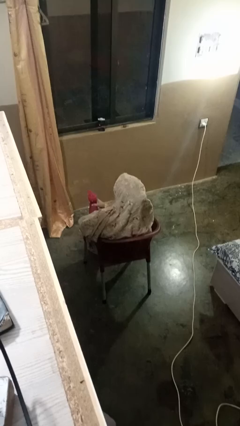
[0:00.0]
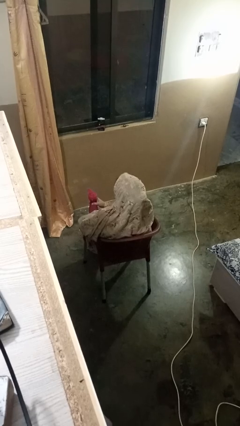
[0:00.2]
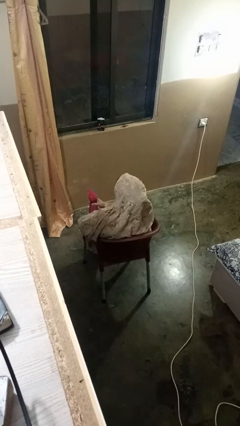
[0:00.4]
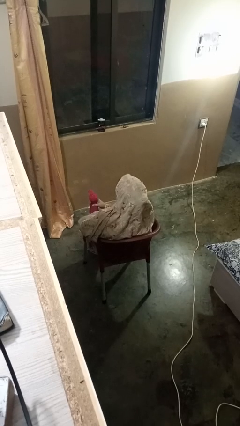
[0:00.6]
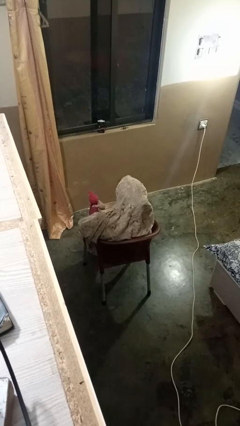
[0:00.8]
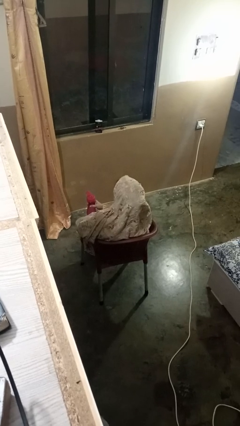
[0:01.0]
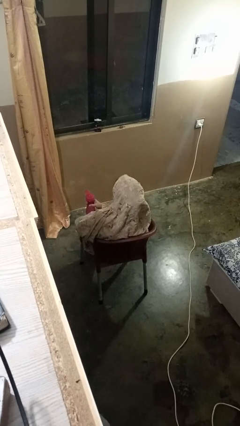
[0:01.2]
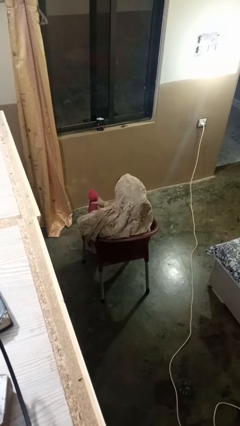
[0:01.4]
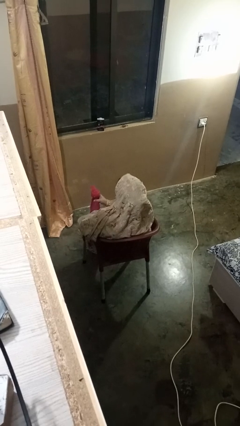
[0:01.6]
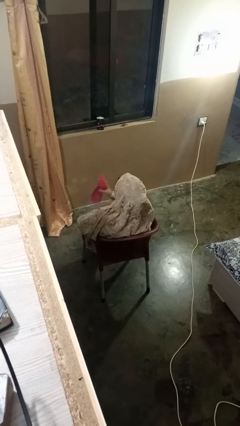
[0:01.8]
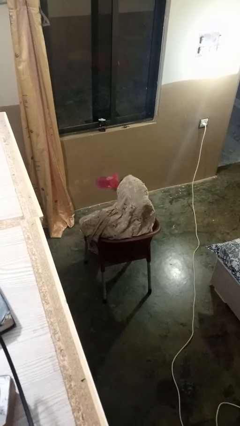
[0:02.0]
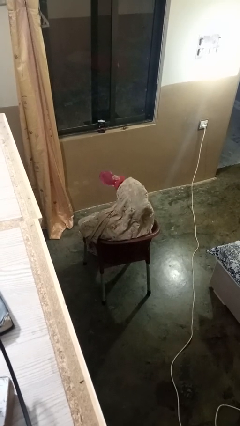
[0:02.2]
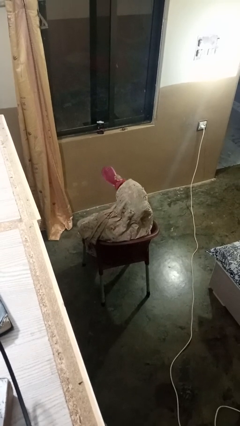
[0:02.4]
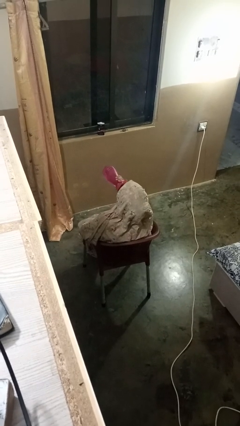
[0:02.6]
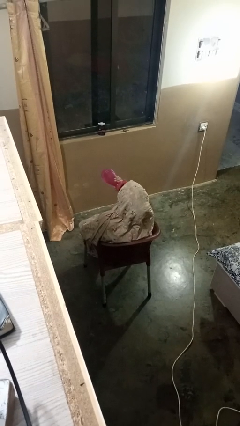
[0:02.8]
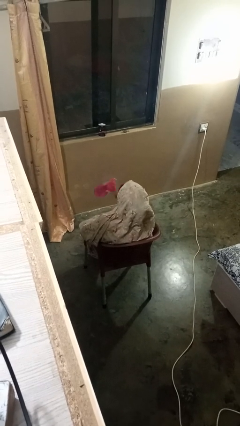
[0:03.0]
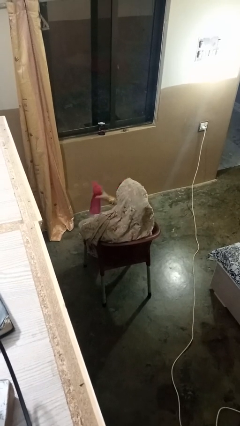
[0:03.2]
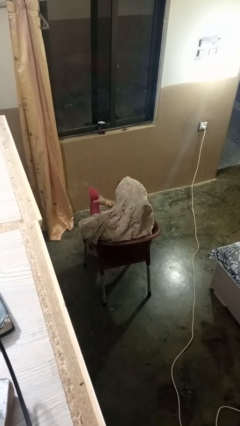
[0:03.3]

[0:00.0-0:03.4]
person drinks from bottle

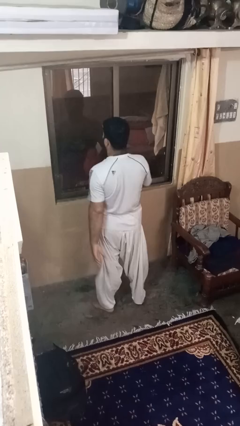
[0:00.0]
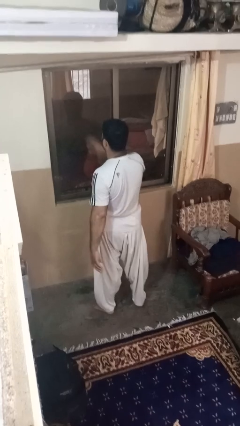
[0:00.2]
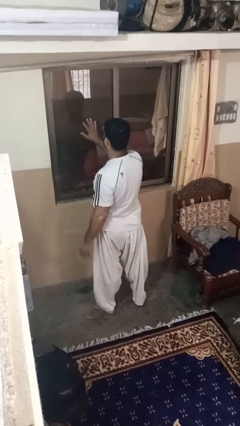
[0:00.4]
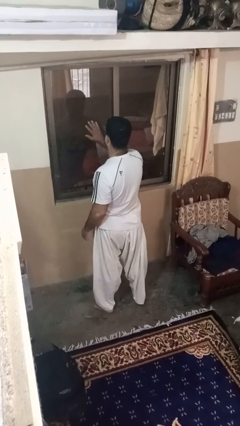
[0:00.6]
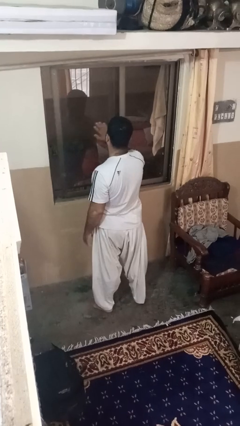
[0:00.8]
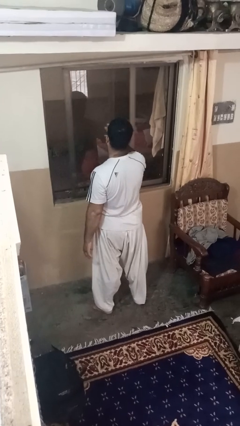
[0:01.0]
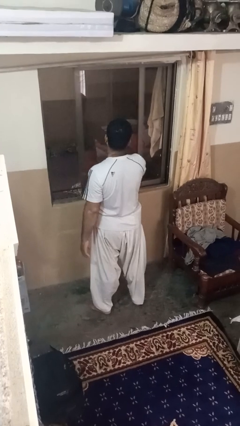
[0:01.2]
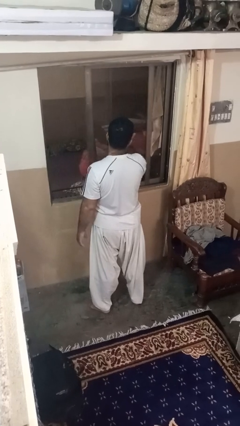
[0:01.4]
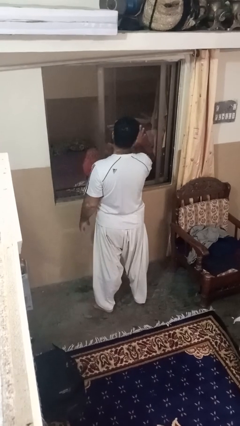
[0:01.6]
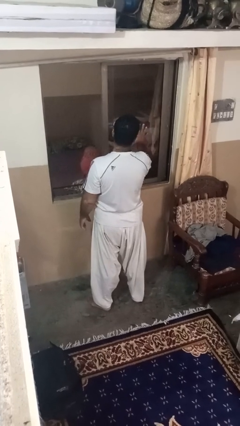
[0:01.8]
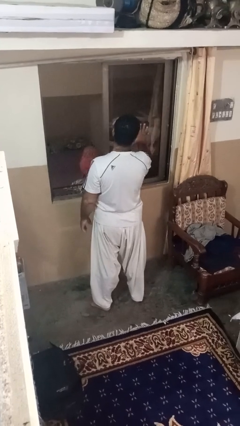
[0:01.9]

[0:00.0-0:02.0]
person opens home window

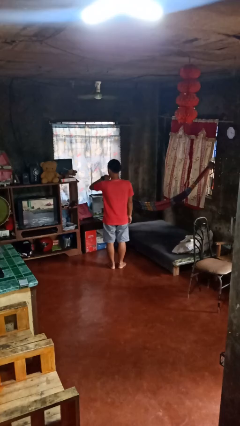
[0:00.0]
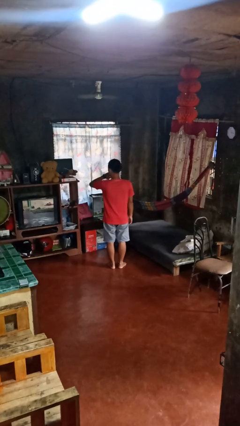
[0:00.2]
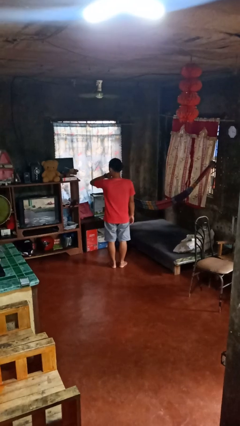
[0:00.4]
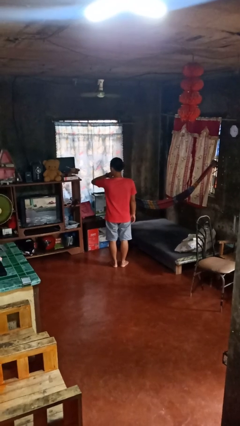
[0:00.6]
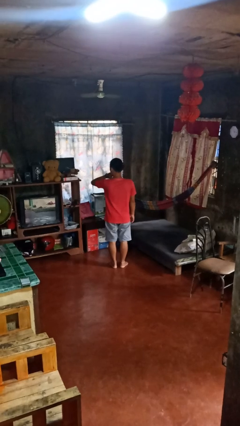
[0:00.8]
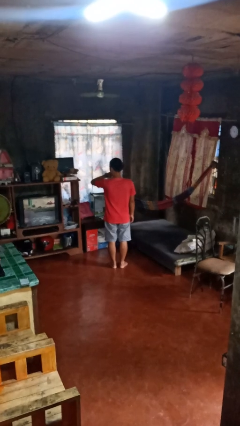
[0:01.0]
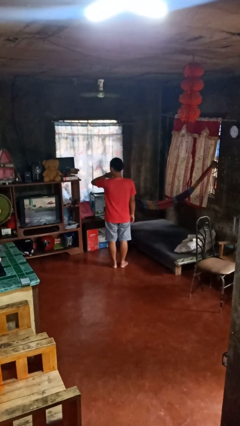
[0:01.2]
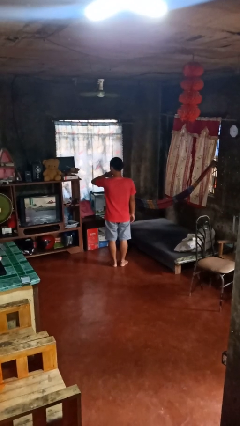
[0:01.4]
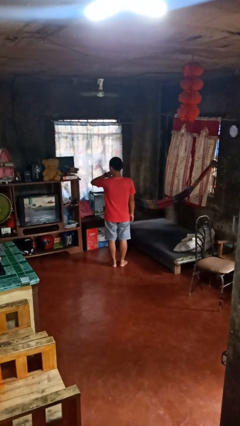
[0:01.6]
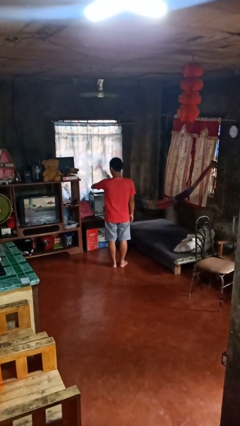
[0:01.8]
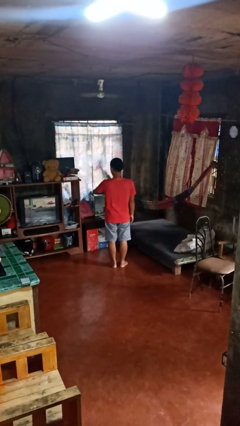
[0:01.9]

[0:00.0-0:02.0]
person looks at wristwatch

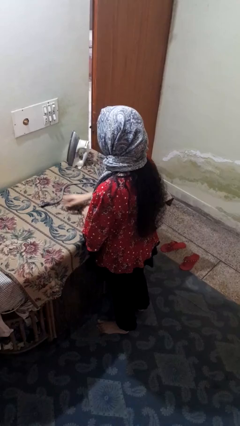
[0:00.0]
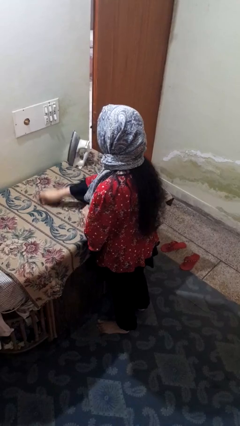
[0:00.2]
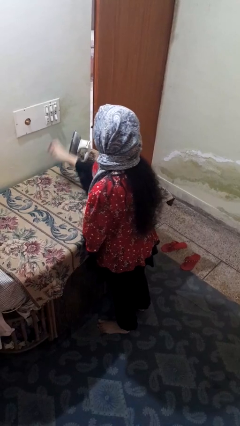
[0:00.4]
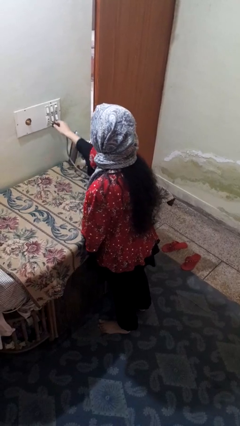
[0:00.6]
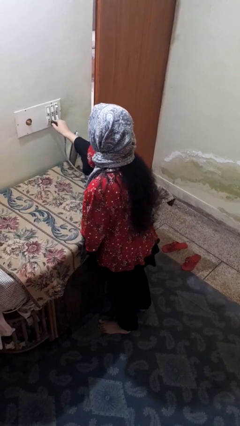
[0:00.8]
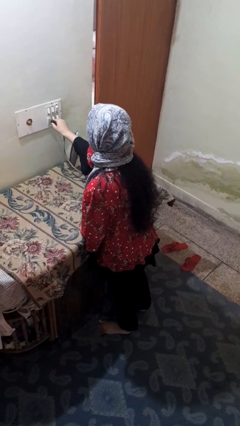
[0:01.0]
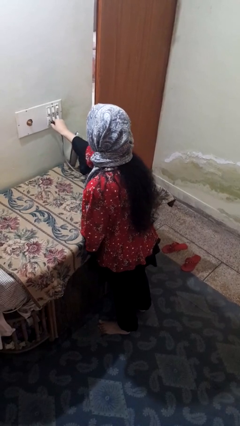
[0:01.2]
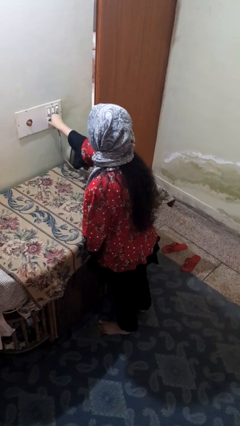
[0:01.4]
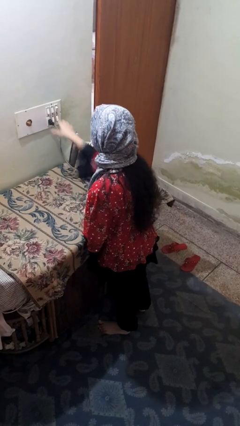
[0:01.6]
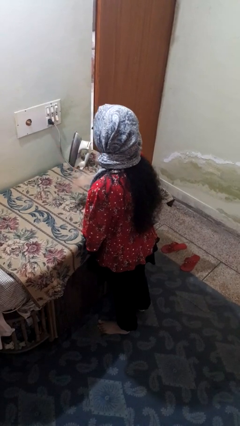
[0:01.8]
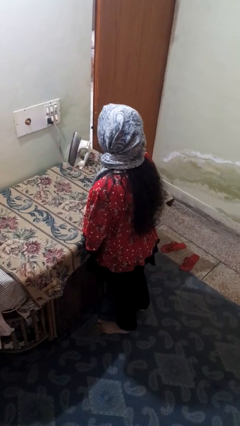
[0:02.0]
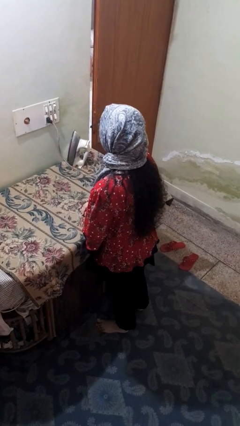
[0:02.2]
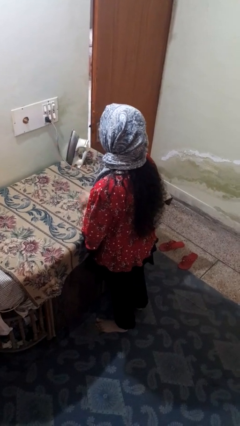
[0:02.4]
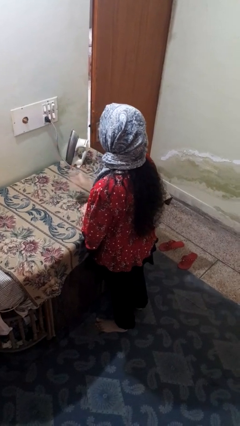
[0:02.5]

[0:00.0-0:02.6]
person plugs into electrical socket

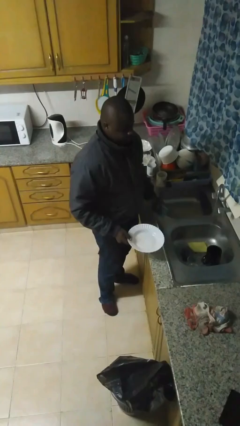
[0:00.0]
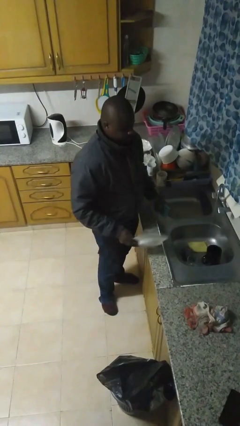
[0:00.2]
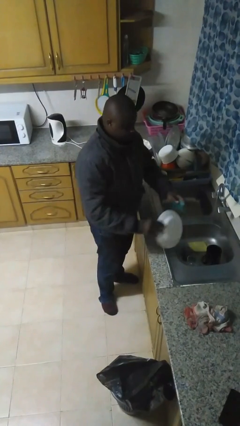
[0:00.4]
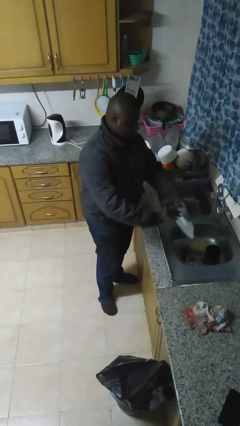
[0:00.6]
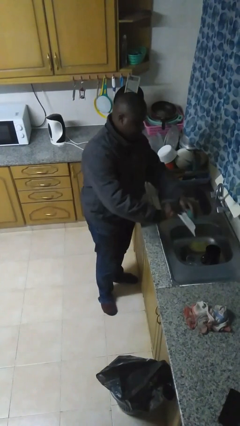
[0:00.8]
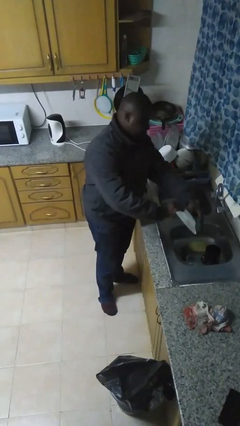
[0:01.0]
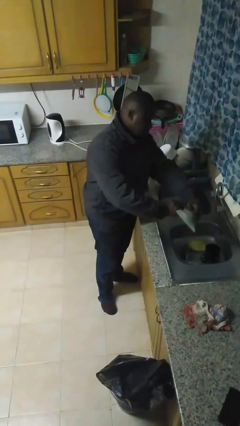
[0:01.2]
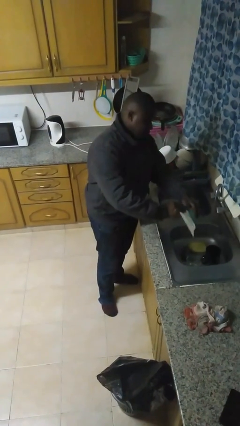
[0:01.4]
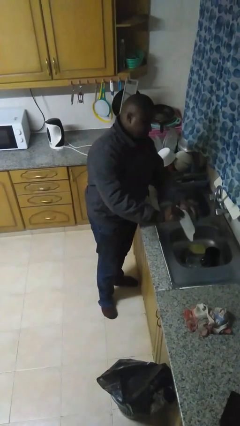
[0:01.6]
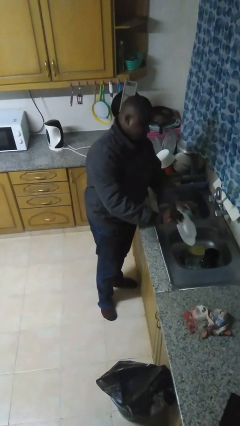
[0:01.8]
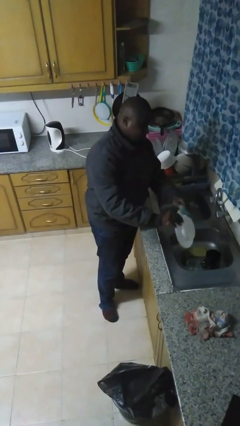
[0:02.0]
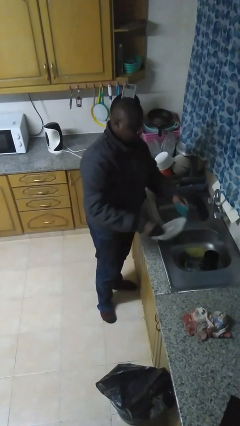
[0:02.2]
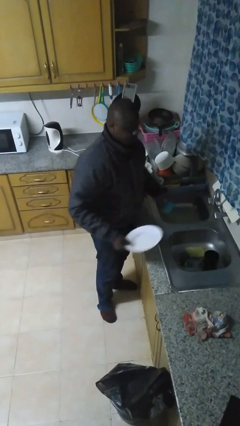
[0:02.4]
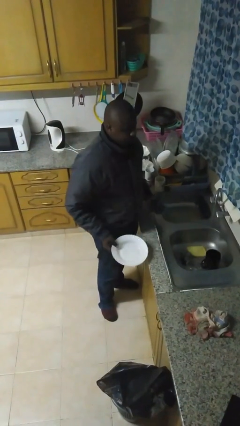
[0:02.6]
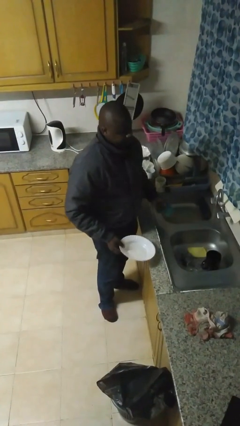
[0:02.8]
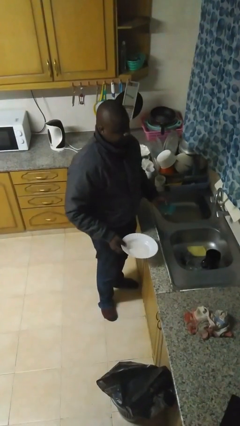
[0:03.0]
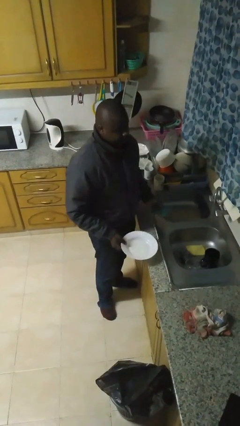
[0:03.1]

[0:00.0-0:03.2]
person washes dish

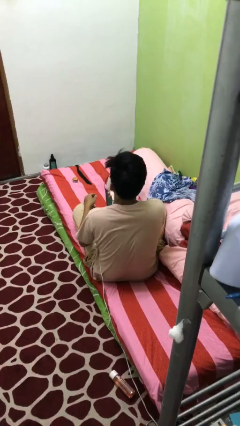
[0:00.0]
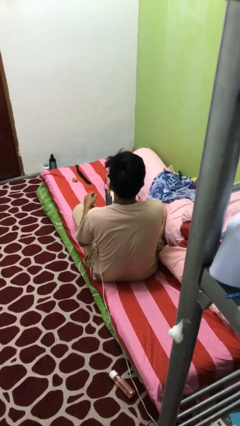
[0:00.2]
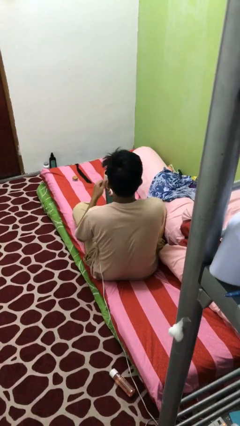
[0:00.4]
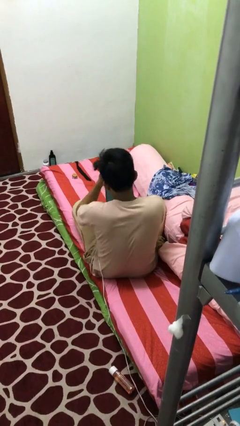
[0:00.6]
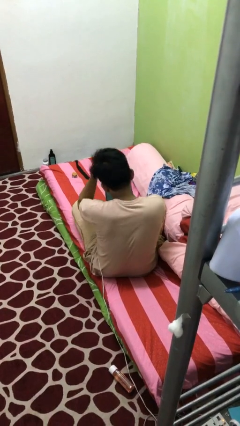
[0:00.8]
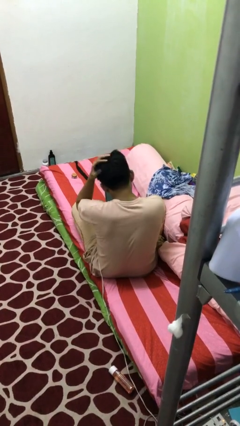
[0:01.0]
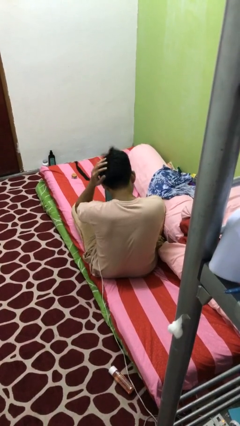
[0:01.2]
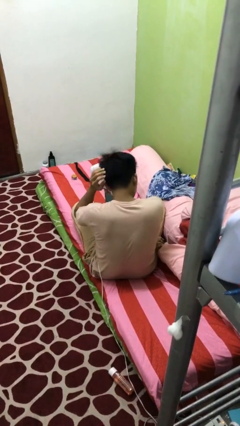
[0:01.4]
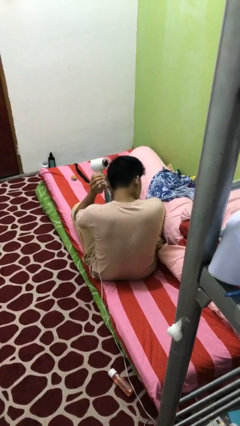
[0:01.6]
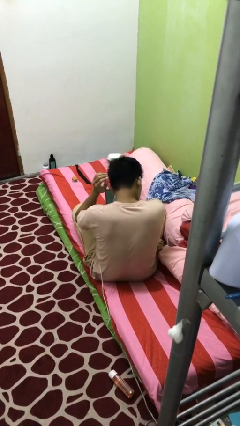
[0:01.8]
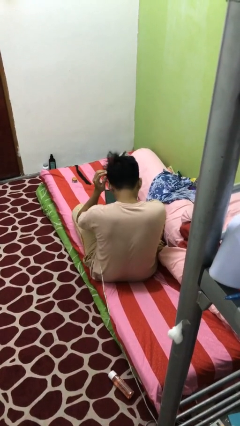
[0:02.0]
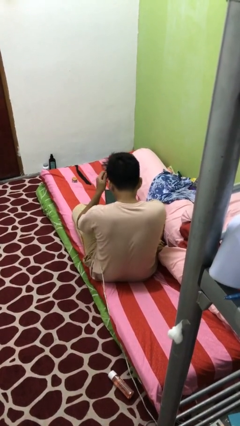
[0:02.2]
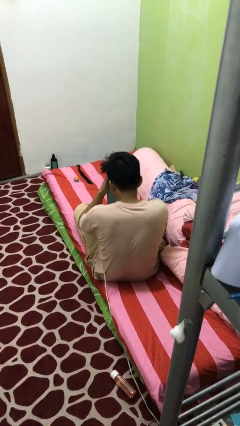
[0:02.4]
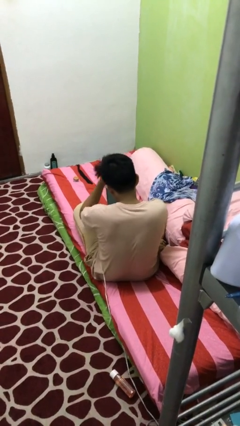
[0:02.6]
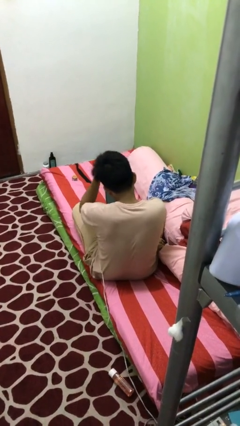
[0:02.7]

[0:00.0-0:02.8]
person dries hair with hairdryer

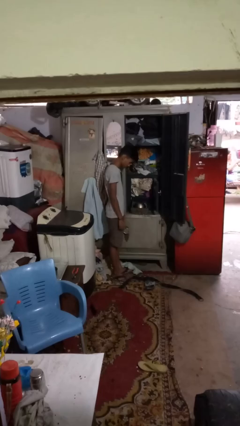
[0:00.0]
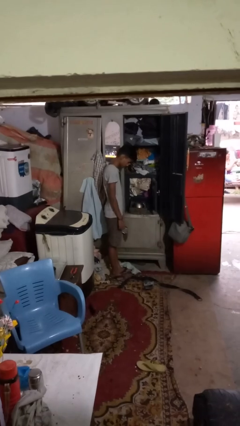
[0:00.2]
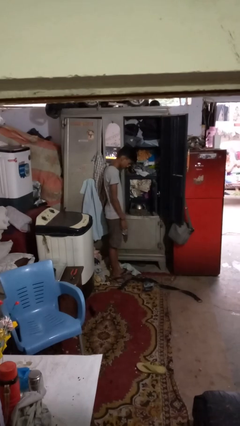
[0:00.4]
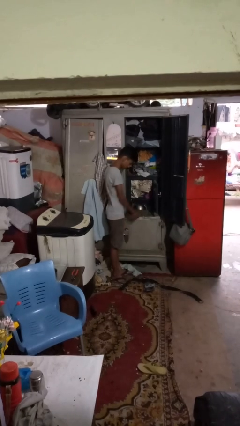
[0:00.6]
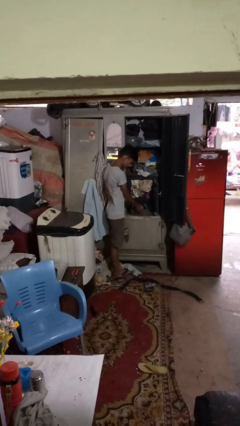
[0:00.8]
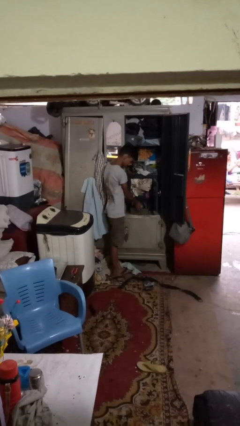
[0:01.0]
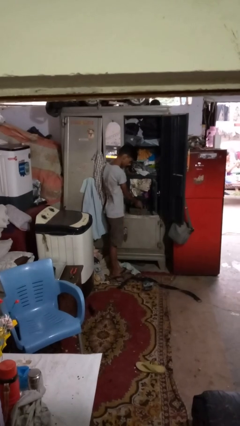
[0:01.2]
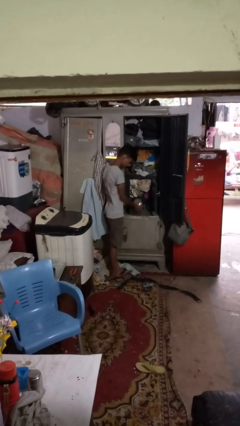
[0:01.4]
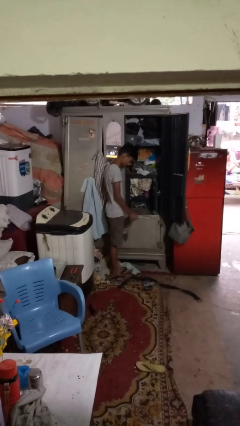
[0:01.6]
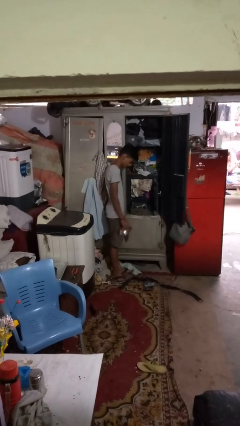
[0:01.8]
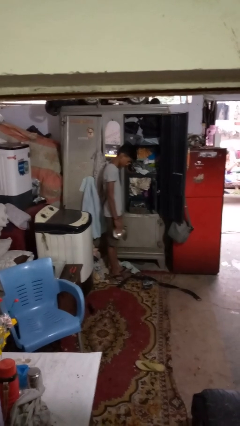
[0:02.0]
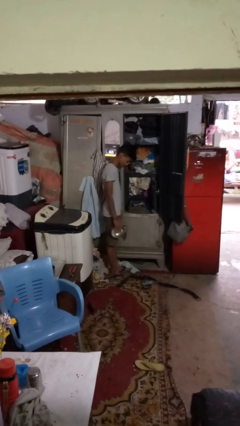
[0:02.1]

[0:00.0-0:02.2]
person takes clothes from dresser
